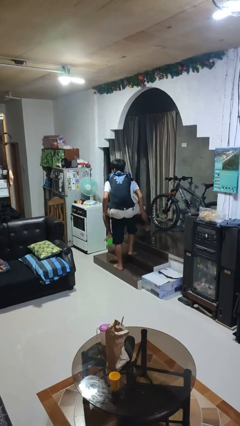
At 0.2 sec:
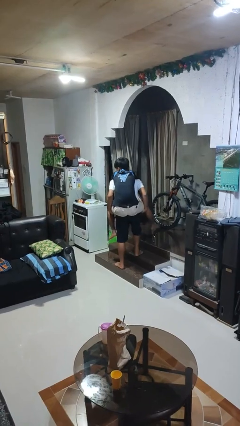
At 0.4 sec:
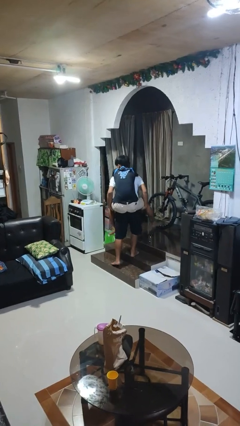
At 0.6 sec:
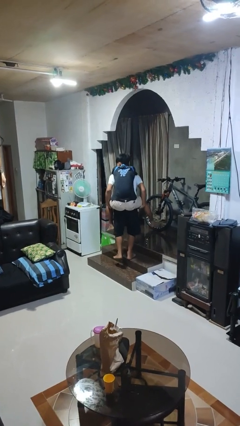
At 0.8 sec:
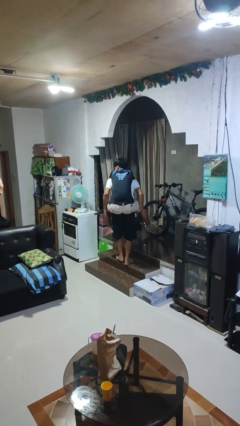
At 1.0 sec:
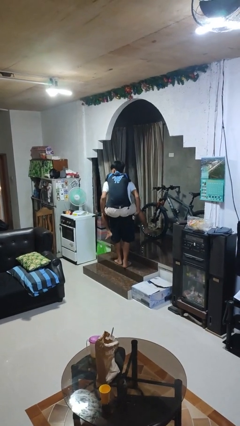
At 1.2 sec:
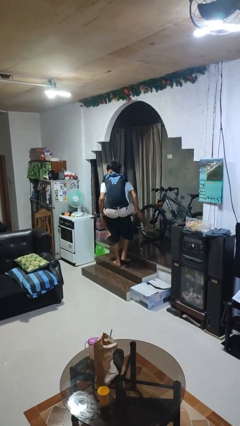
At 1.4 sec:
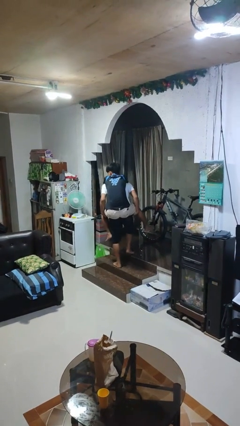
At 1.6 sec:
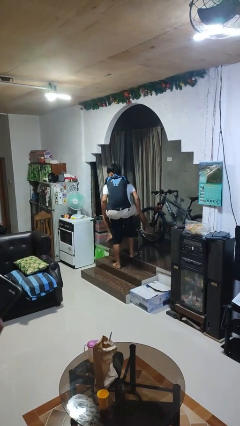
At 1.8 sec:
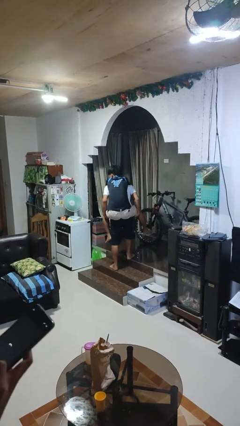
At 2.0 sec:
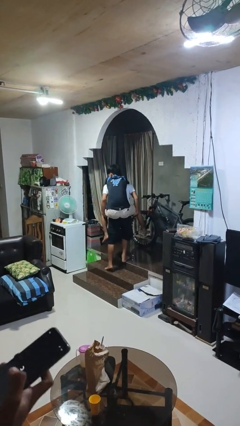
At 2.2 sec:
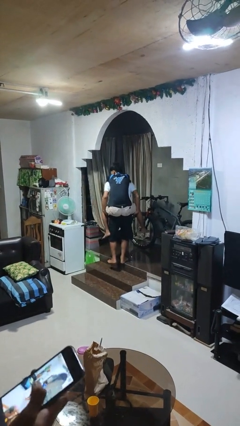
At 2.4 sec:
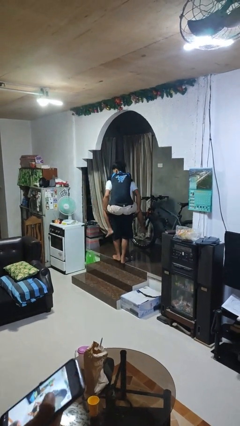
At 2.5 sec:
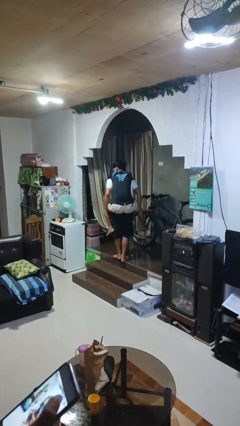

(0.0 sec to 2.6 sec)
person carries person on back

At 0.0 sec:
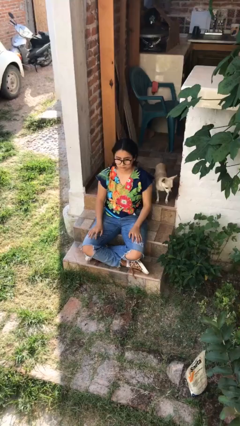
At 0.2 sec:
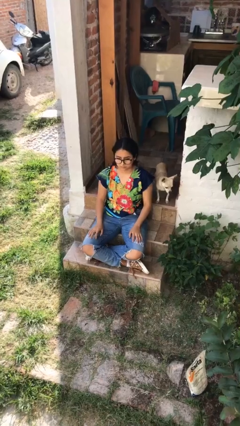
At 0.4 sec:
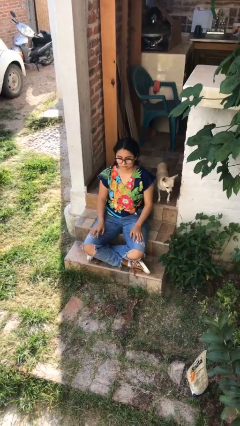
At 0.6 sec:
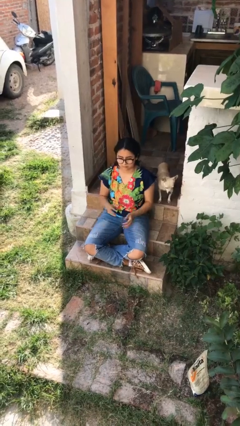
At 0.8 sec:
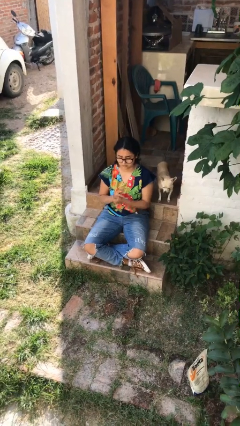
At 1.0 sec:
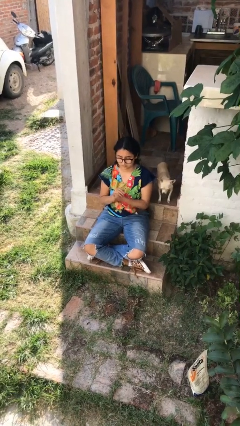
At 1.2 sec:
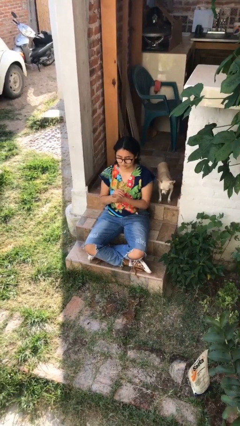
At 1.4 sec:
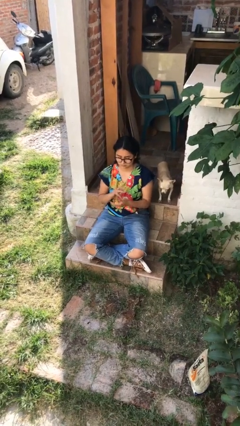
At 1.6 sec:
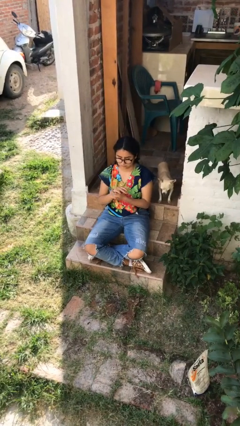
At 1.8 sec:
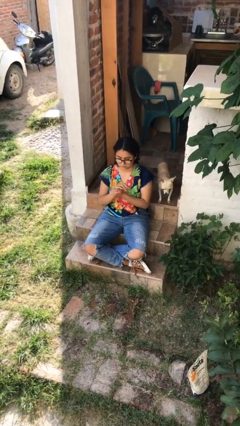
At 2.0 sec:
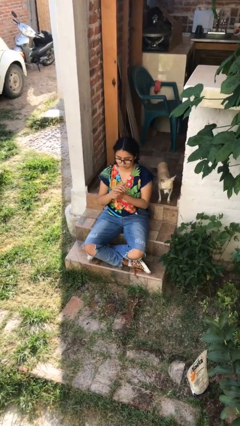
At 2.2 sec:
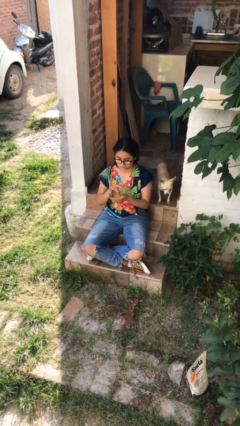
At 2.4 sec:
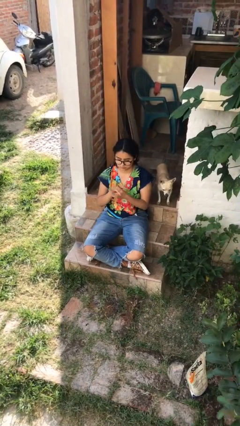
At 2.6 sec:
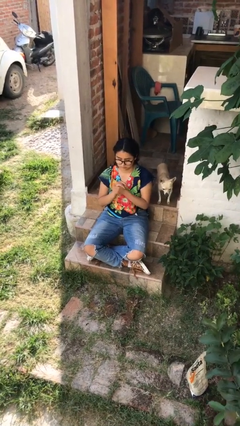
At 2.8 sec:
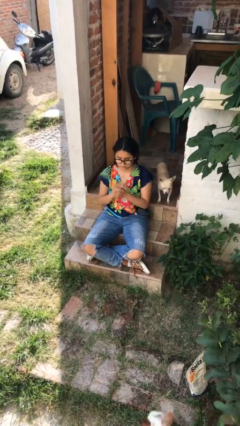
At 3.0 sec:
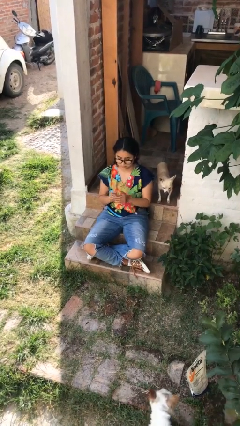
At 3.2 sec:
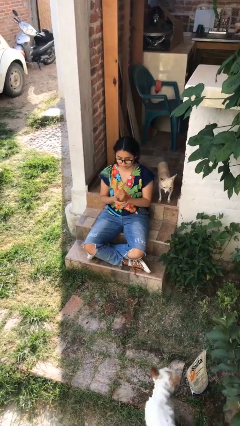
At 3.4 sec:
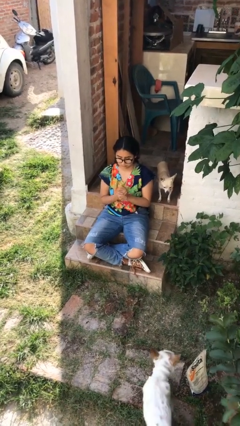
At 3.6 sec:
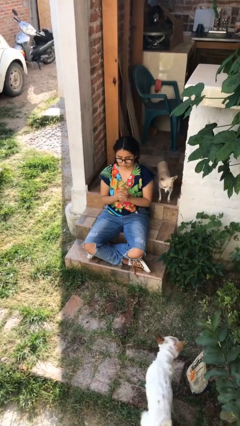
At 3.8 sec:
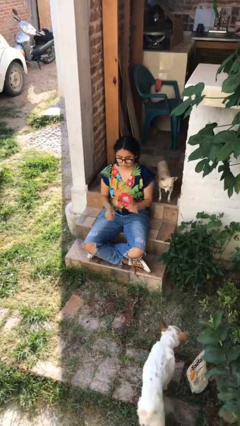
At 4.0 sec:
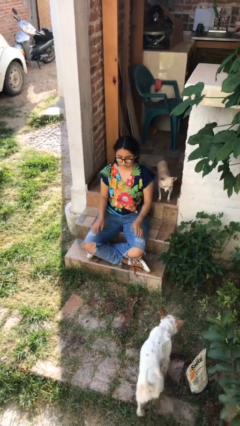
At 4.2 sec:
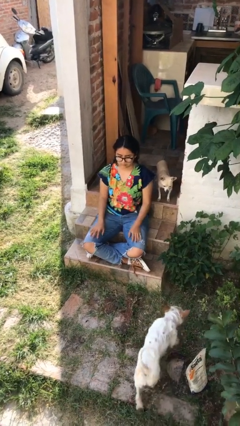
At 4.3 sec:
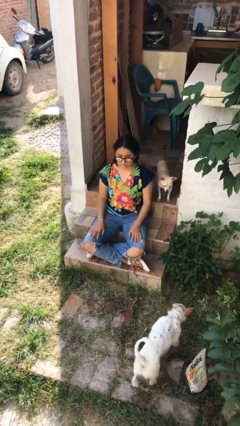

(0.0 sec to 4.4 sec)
person cracks knuckles

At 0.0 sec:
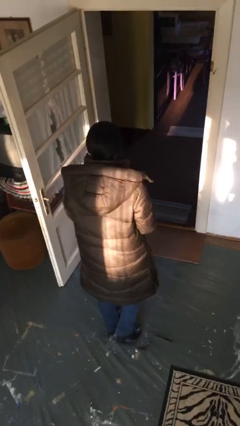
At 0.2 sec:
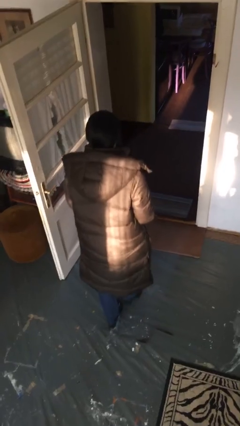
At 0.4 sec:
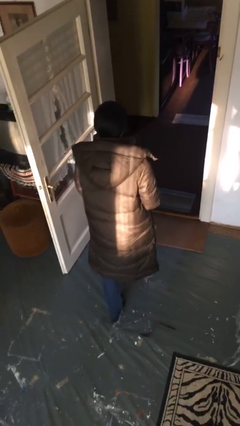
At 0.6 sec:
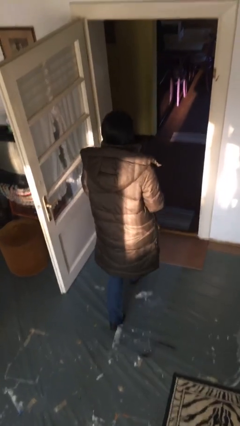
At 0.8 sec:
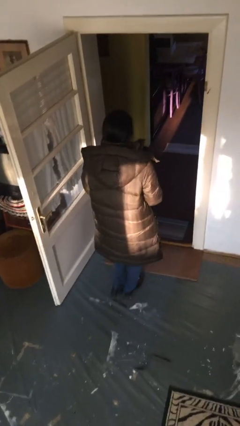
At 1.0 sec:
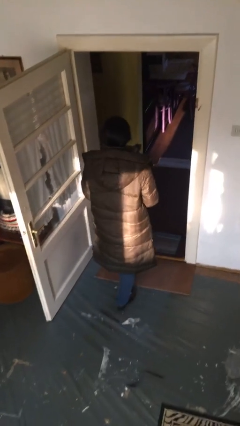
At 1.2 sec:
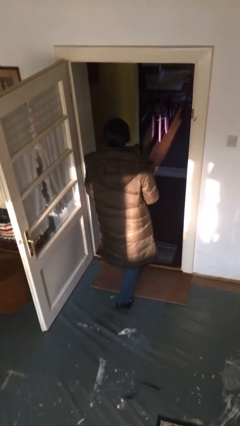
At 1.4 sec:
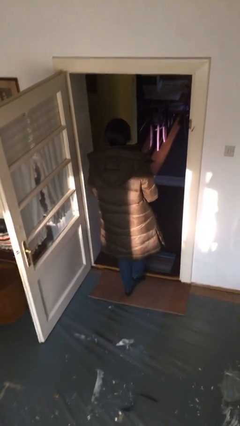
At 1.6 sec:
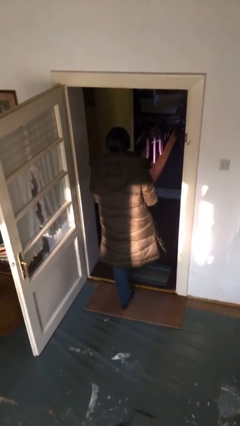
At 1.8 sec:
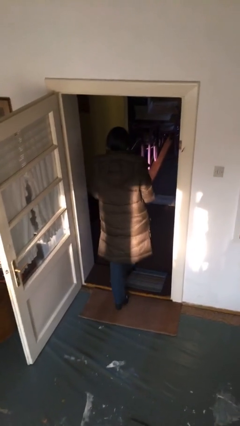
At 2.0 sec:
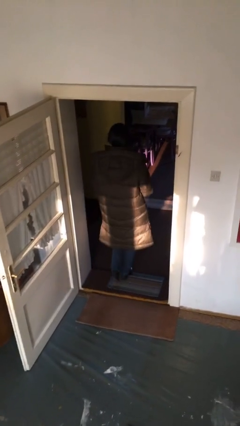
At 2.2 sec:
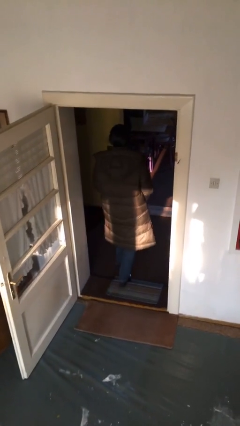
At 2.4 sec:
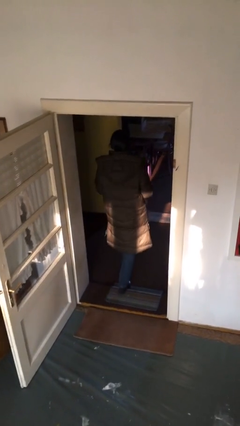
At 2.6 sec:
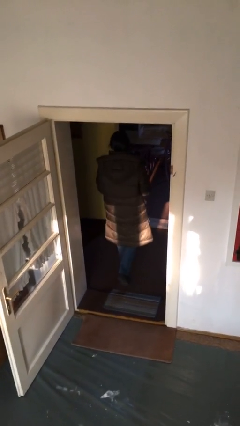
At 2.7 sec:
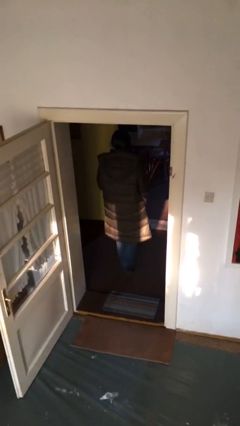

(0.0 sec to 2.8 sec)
person exits scene through structure

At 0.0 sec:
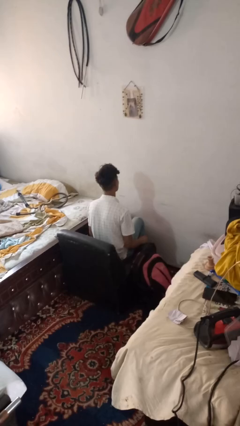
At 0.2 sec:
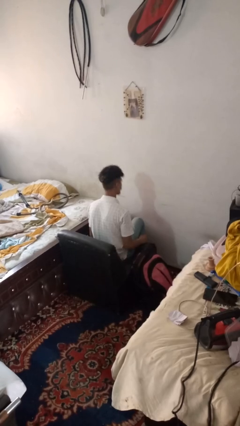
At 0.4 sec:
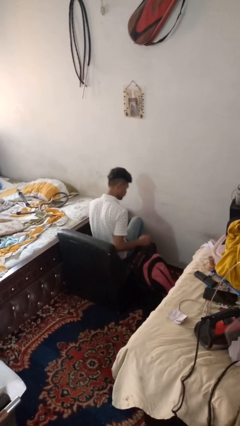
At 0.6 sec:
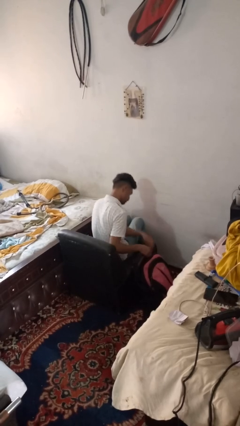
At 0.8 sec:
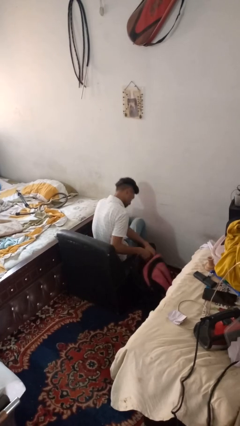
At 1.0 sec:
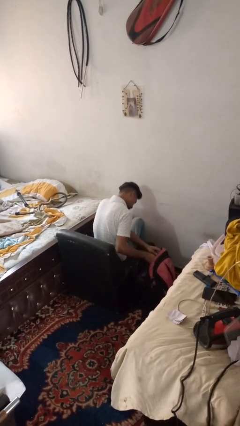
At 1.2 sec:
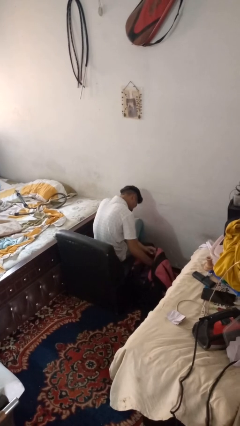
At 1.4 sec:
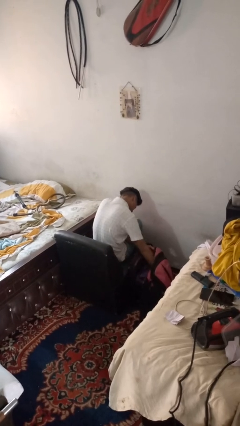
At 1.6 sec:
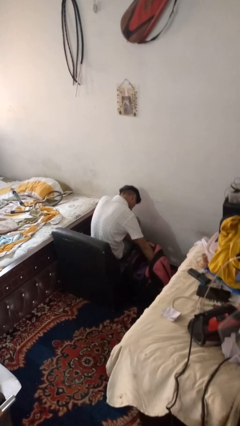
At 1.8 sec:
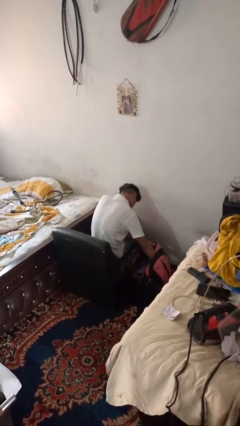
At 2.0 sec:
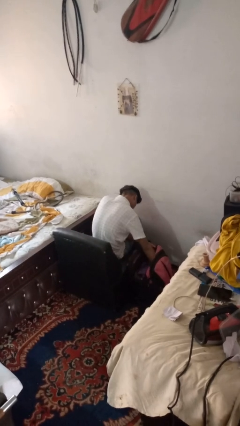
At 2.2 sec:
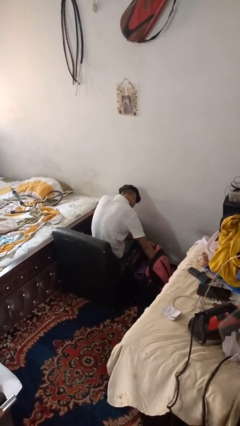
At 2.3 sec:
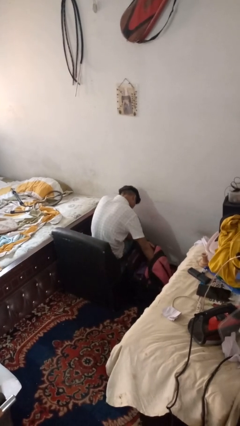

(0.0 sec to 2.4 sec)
person searches in bag

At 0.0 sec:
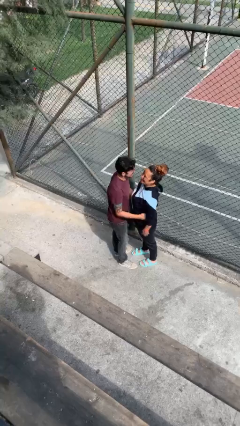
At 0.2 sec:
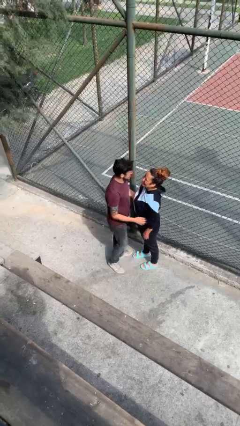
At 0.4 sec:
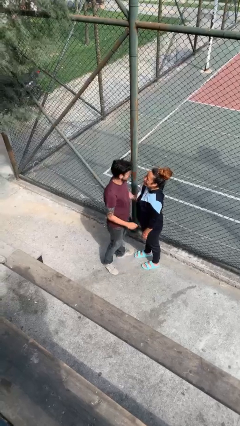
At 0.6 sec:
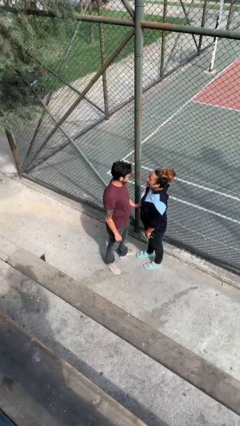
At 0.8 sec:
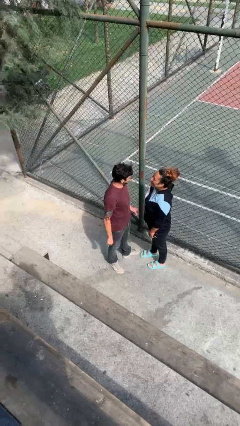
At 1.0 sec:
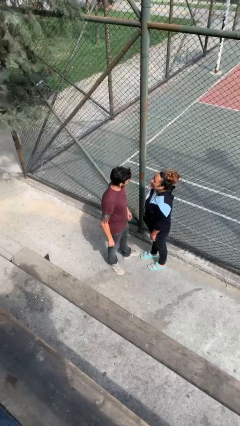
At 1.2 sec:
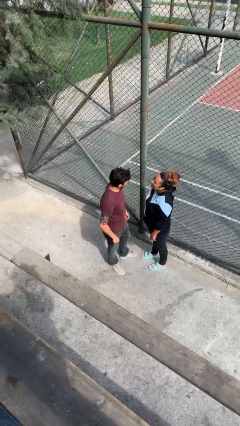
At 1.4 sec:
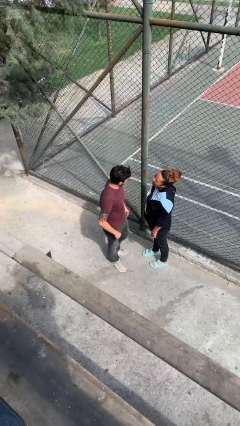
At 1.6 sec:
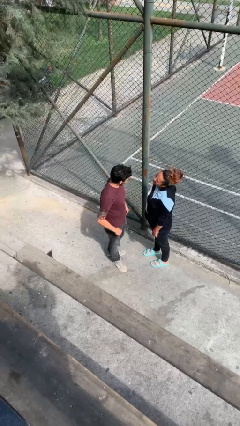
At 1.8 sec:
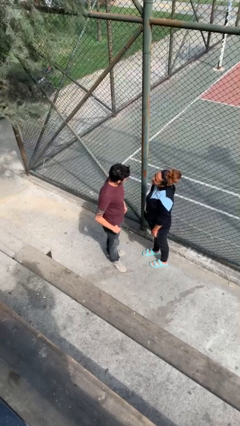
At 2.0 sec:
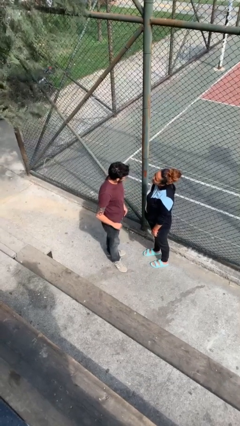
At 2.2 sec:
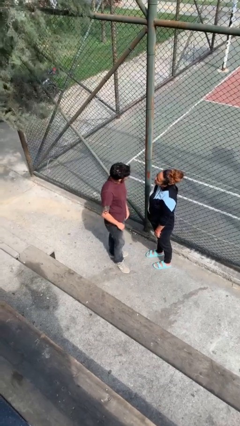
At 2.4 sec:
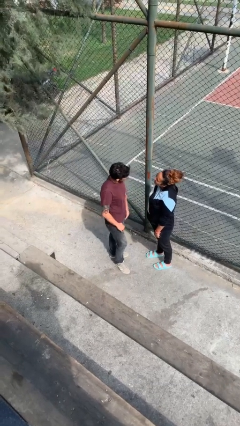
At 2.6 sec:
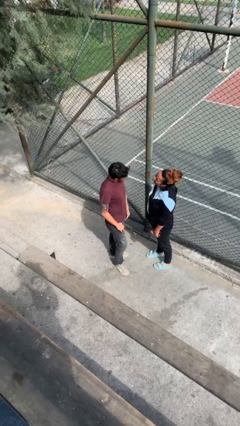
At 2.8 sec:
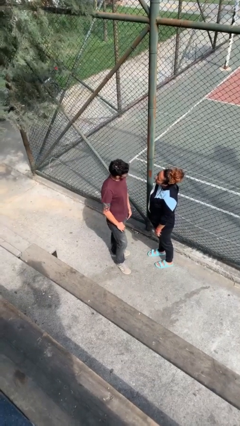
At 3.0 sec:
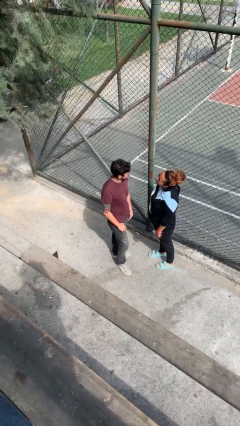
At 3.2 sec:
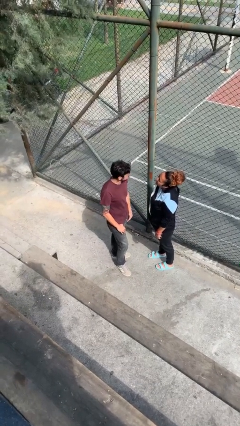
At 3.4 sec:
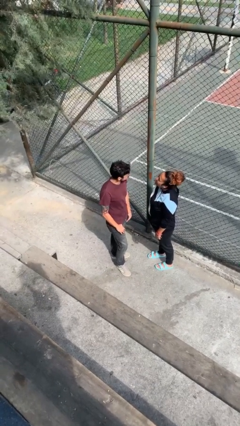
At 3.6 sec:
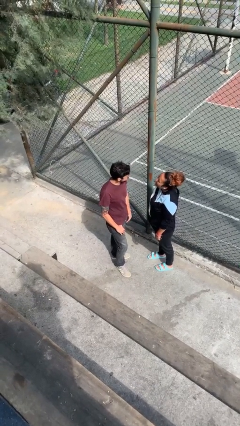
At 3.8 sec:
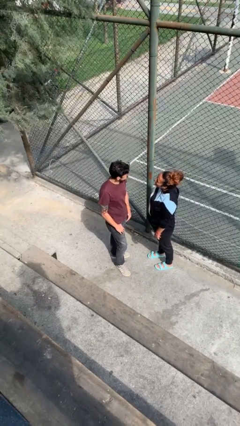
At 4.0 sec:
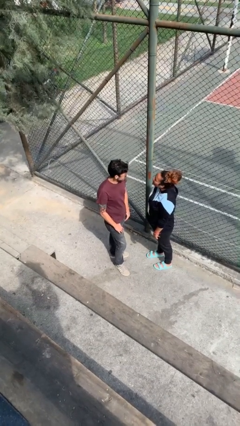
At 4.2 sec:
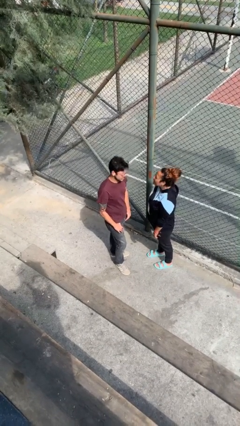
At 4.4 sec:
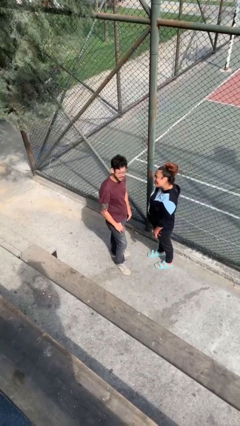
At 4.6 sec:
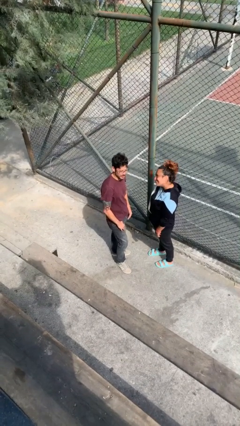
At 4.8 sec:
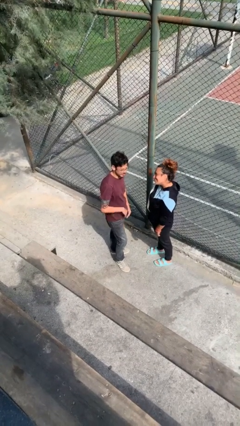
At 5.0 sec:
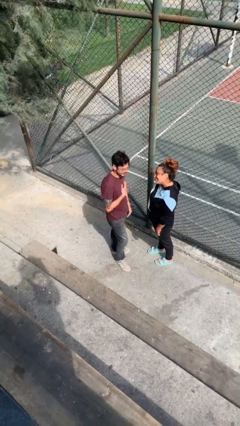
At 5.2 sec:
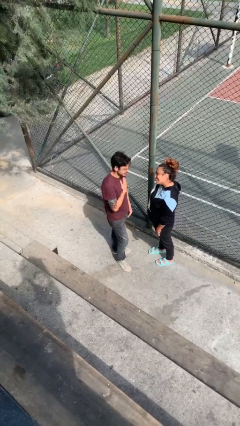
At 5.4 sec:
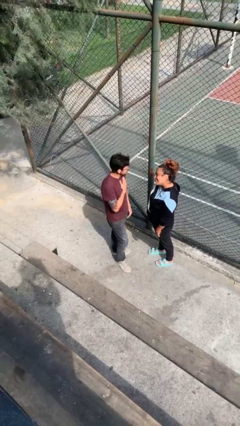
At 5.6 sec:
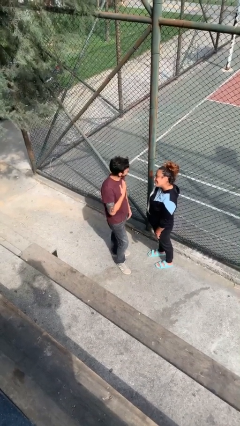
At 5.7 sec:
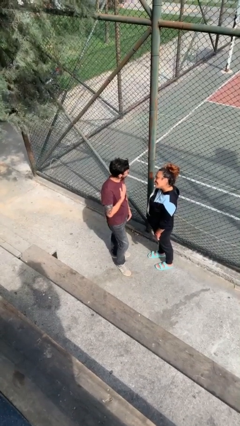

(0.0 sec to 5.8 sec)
person talks to person
